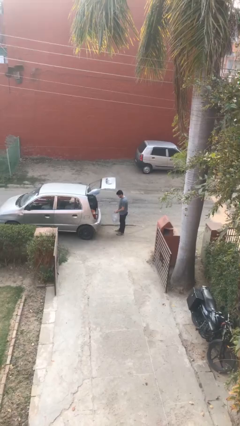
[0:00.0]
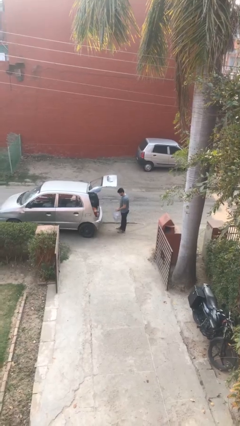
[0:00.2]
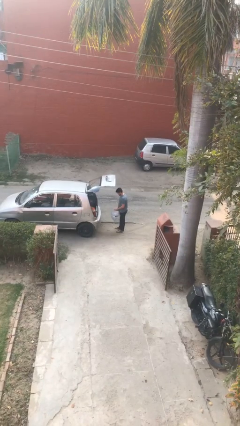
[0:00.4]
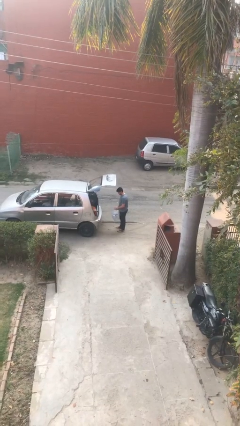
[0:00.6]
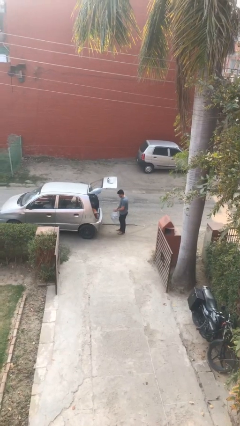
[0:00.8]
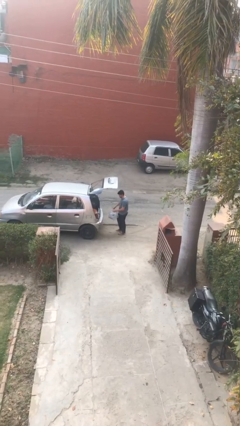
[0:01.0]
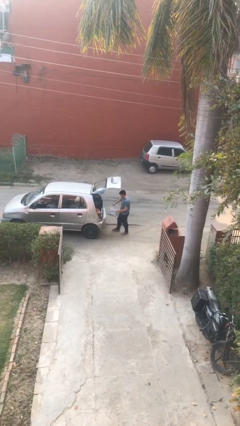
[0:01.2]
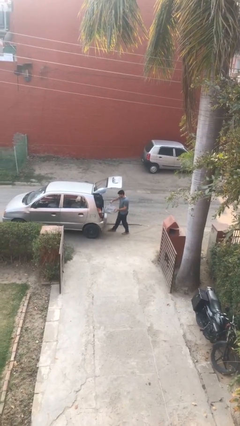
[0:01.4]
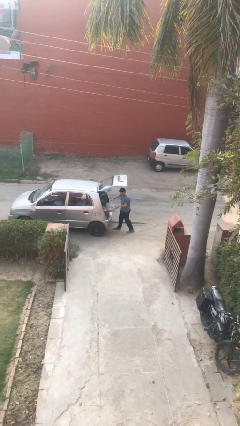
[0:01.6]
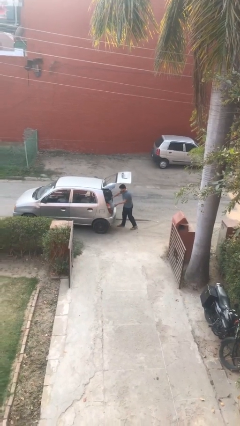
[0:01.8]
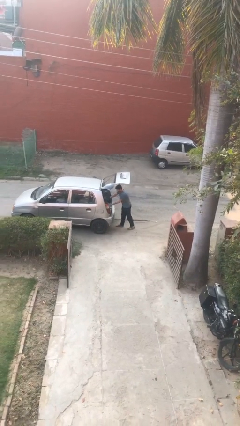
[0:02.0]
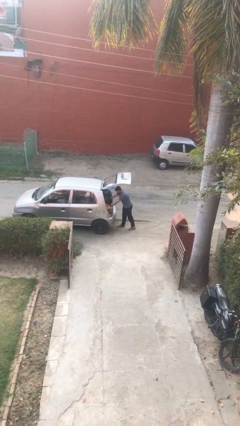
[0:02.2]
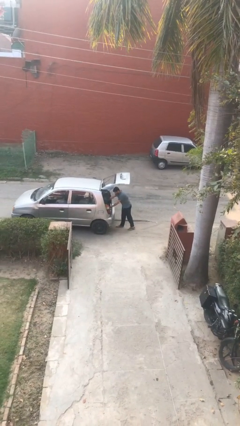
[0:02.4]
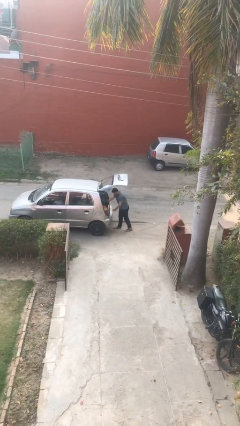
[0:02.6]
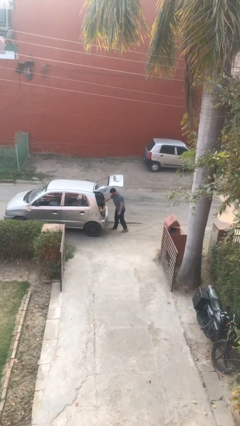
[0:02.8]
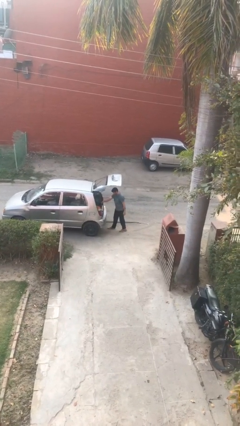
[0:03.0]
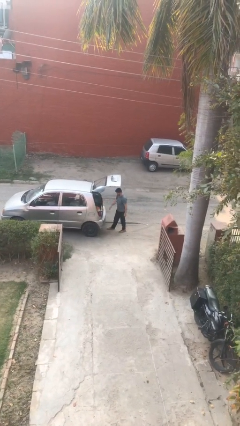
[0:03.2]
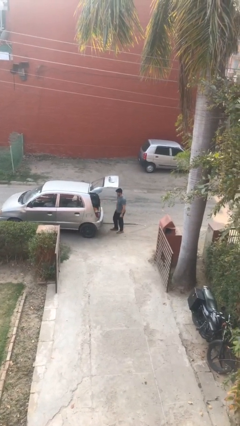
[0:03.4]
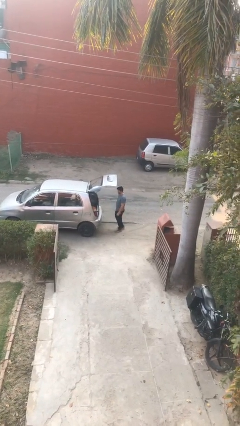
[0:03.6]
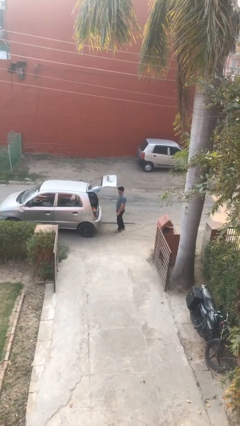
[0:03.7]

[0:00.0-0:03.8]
person loads car

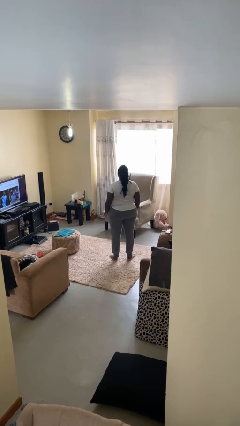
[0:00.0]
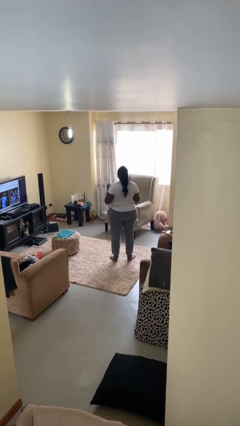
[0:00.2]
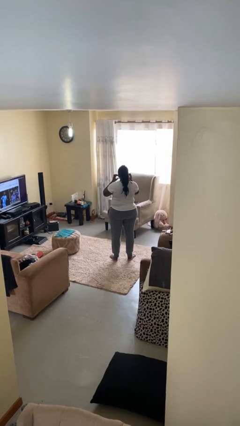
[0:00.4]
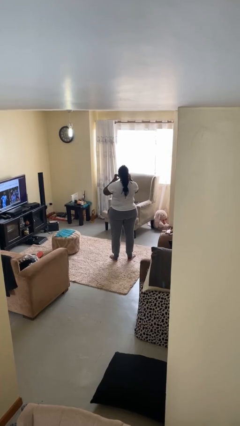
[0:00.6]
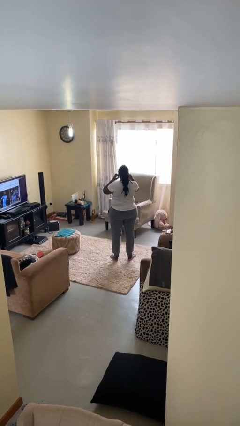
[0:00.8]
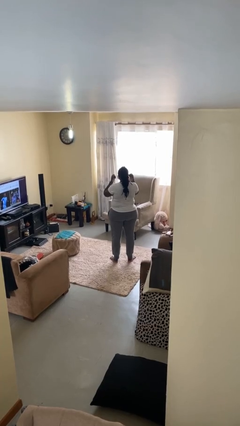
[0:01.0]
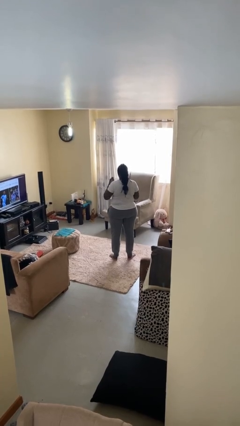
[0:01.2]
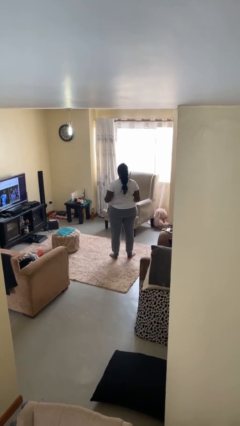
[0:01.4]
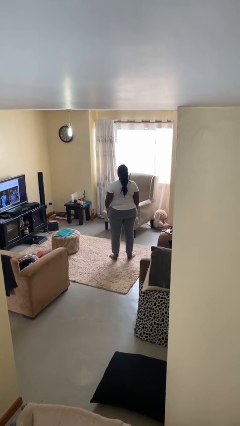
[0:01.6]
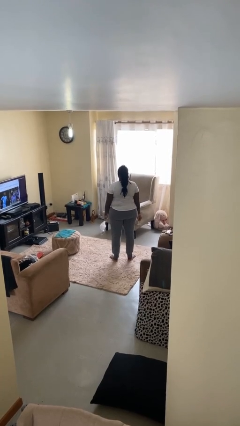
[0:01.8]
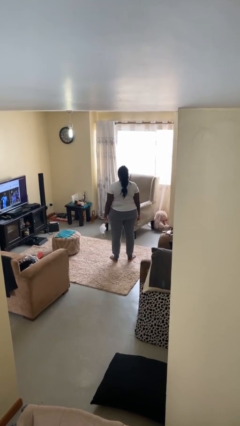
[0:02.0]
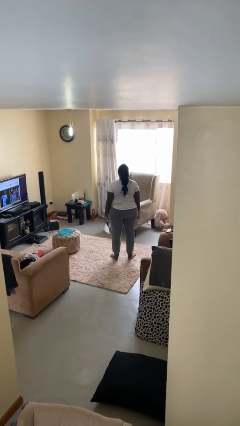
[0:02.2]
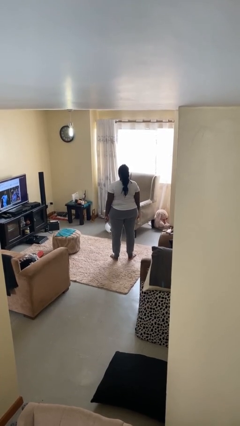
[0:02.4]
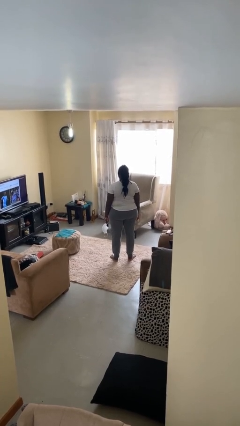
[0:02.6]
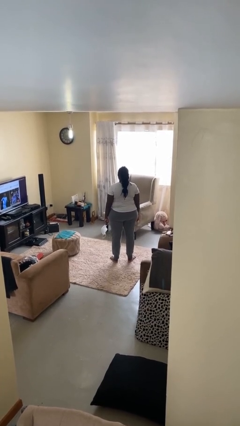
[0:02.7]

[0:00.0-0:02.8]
person takes off facemask

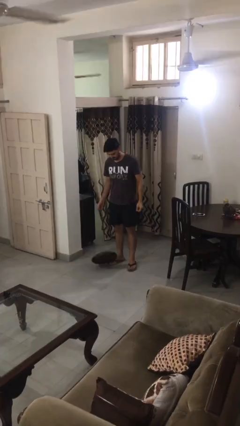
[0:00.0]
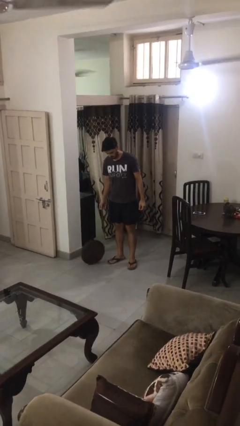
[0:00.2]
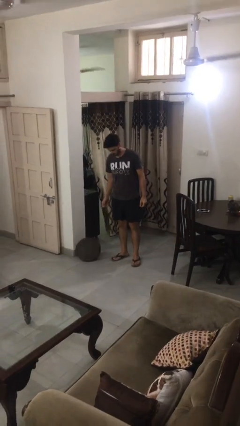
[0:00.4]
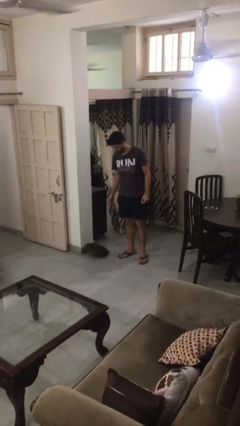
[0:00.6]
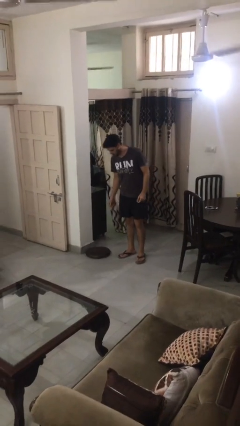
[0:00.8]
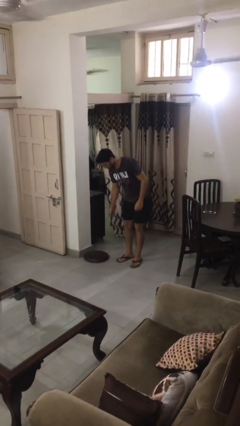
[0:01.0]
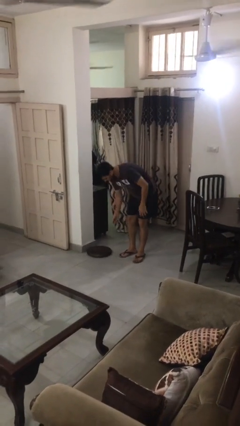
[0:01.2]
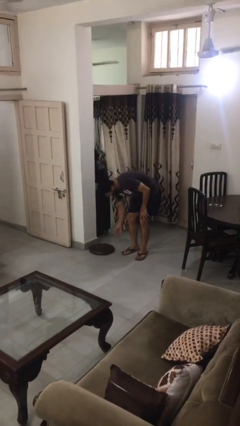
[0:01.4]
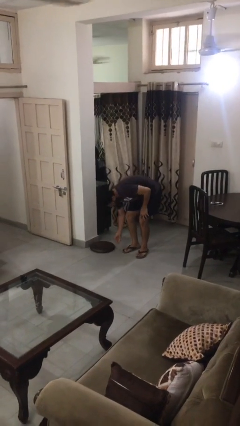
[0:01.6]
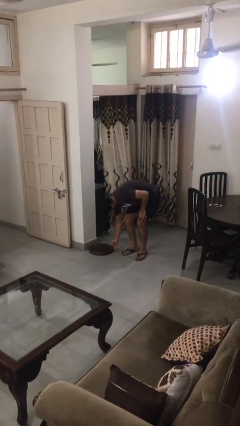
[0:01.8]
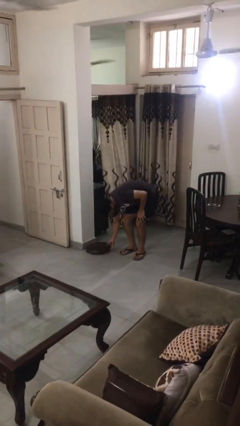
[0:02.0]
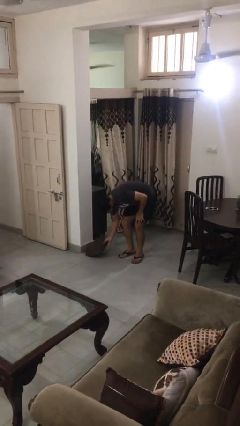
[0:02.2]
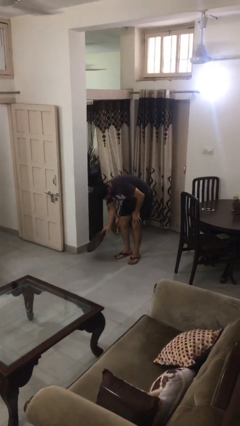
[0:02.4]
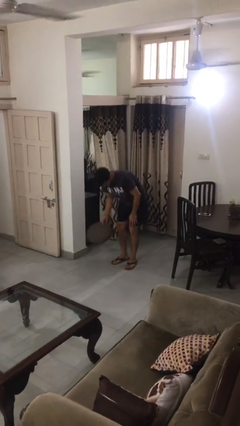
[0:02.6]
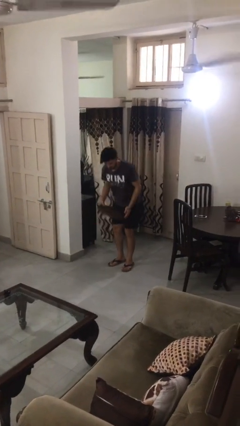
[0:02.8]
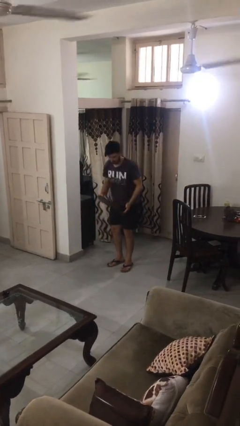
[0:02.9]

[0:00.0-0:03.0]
person picks up object from floor

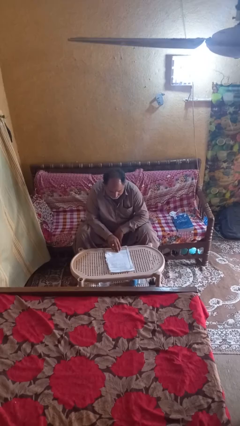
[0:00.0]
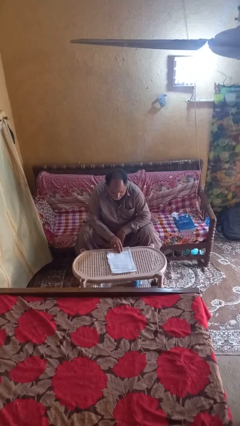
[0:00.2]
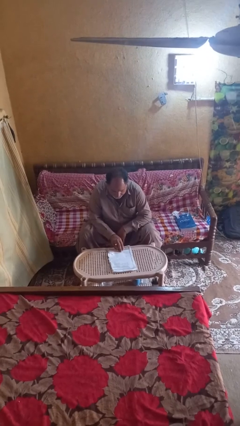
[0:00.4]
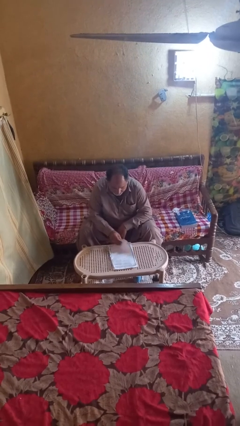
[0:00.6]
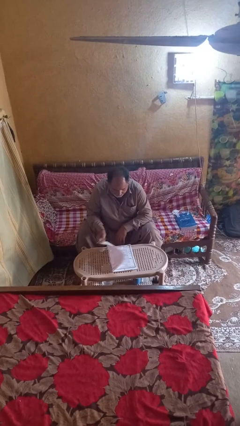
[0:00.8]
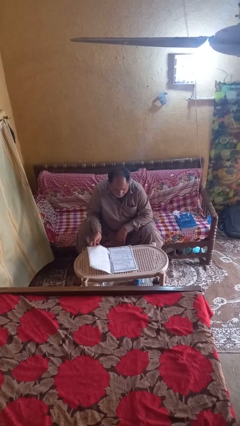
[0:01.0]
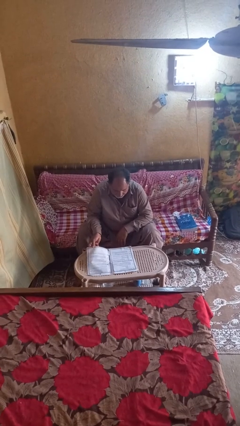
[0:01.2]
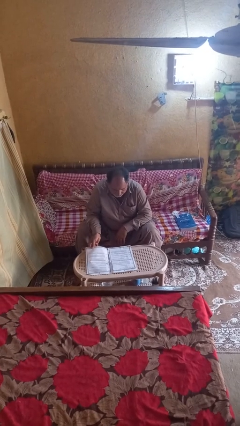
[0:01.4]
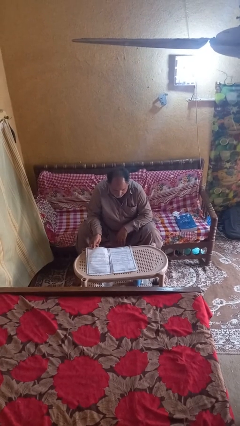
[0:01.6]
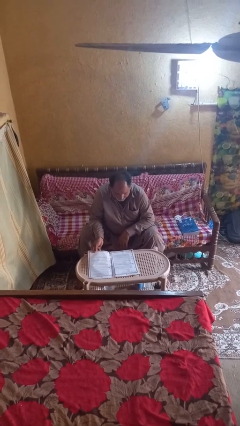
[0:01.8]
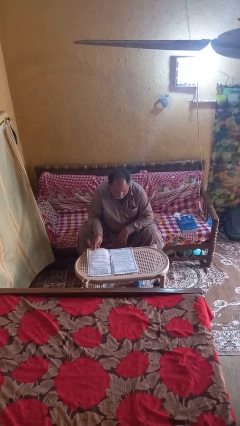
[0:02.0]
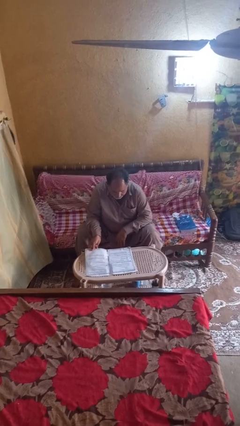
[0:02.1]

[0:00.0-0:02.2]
person reads newspaper

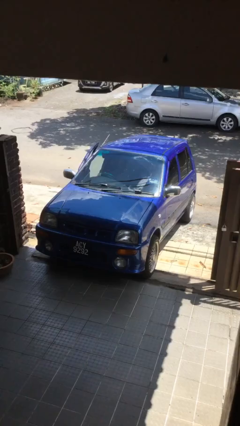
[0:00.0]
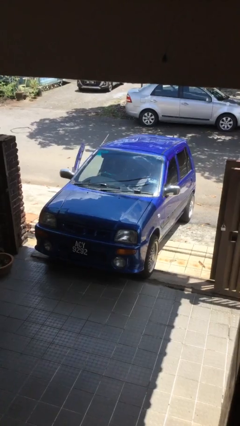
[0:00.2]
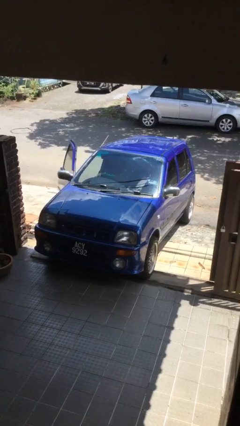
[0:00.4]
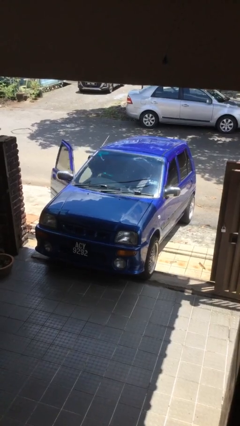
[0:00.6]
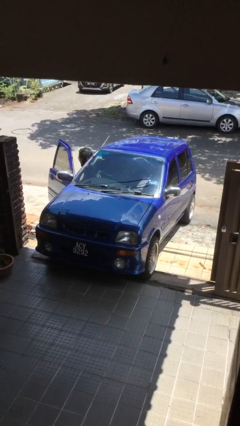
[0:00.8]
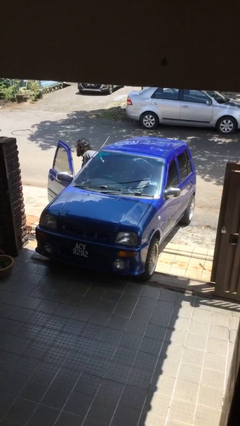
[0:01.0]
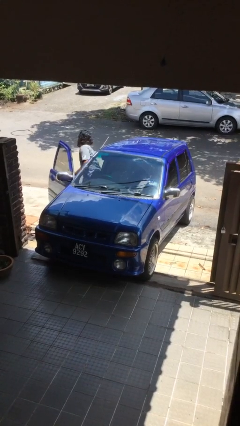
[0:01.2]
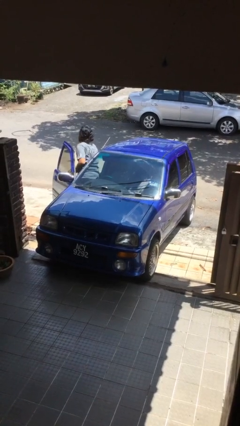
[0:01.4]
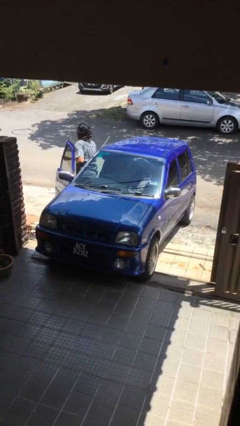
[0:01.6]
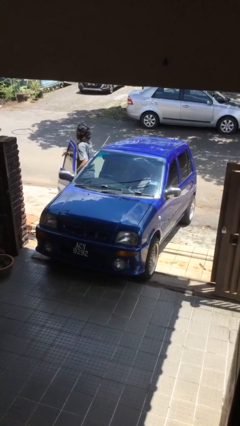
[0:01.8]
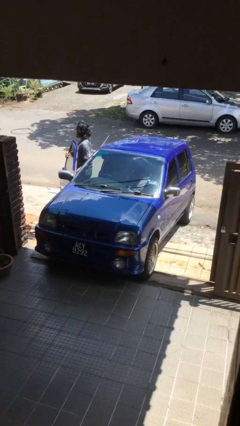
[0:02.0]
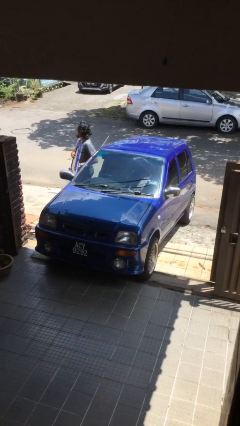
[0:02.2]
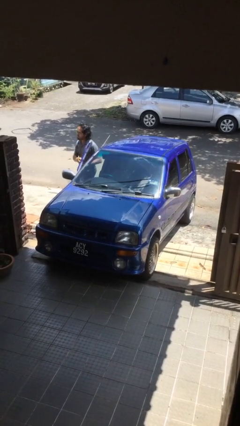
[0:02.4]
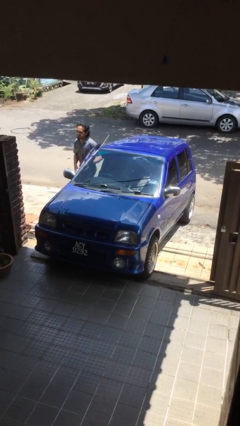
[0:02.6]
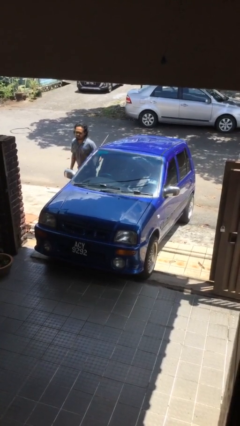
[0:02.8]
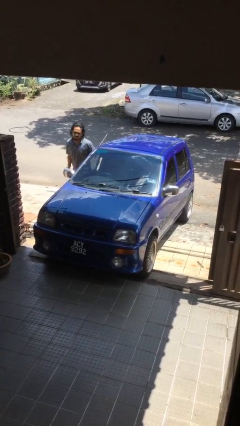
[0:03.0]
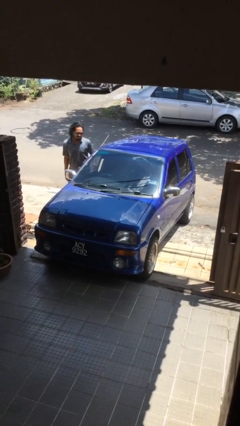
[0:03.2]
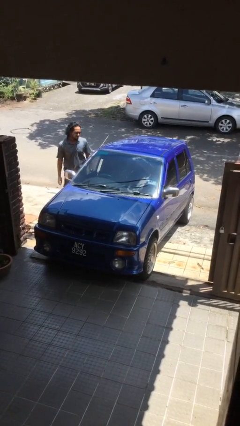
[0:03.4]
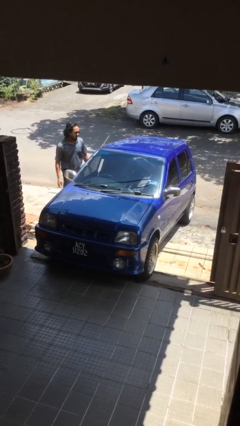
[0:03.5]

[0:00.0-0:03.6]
car drops off person

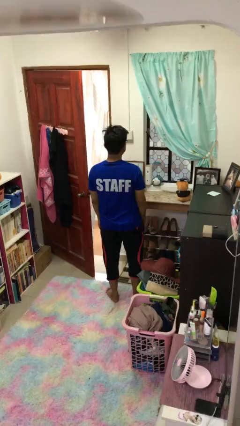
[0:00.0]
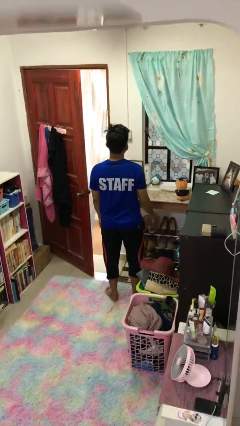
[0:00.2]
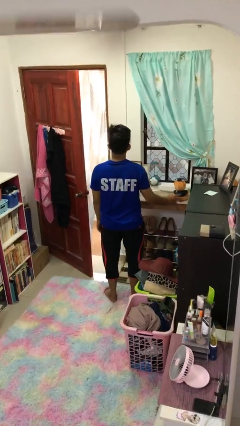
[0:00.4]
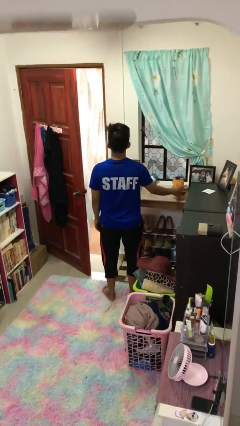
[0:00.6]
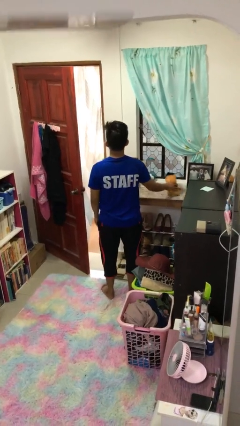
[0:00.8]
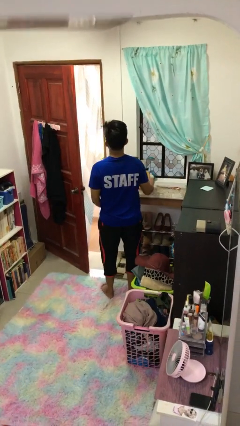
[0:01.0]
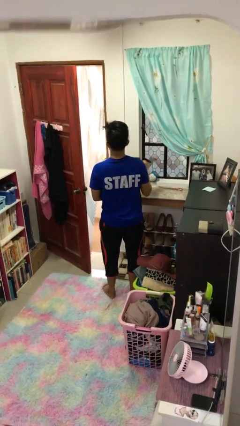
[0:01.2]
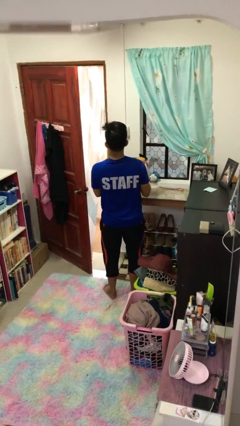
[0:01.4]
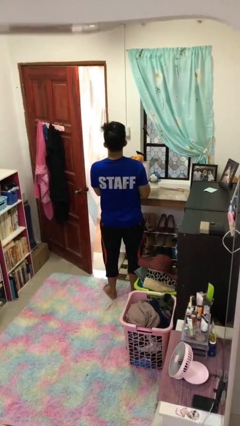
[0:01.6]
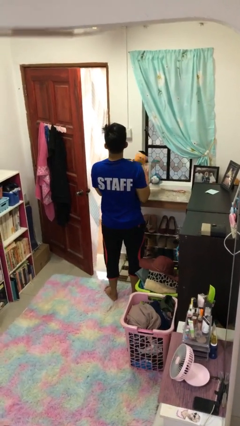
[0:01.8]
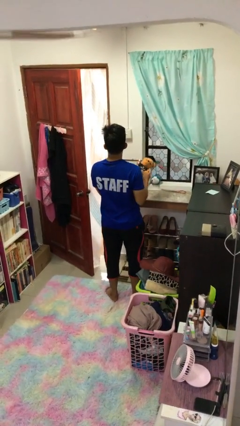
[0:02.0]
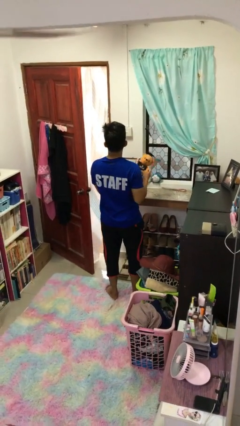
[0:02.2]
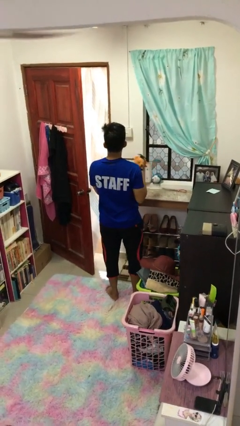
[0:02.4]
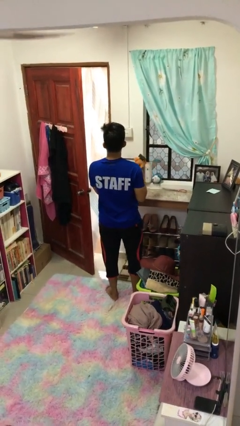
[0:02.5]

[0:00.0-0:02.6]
person picks up object from countertop
